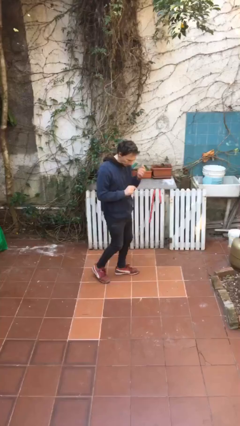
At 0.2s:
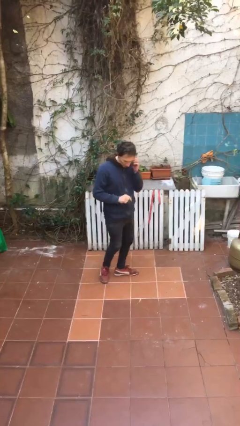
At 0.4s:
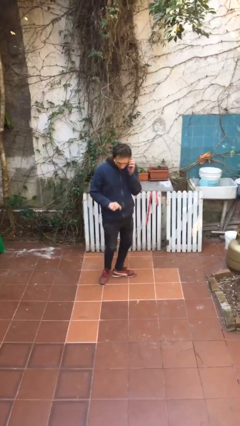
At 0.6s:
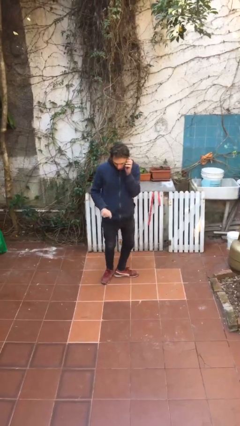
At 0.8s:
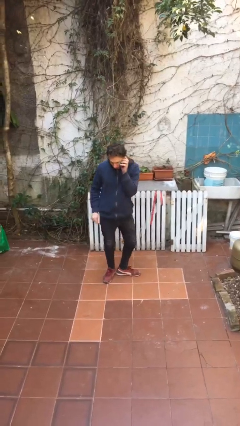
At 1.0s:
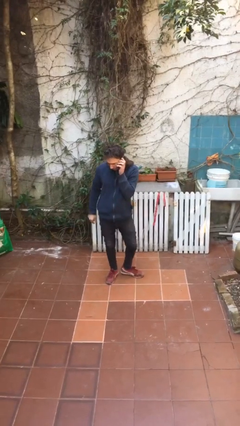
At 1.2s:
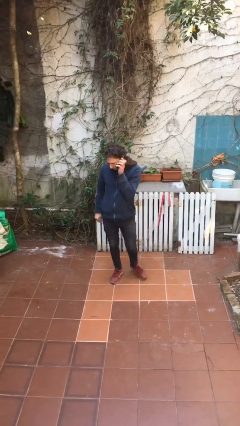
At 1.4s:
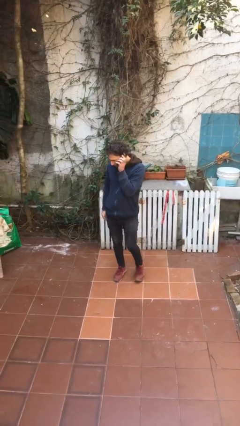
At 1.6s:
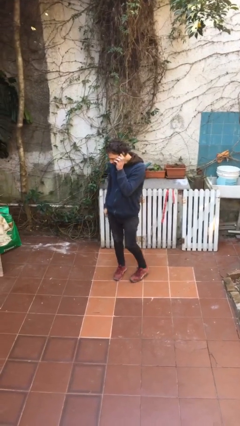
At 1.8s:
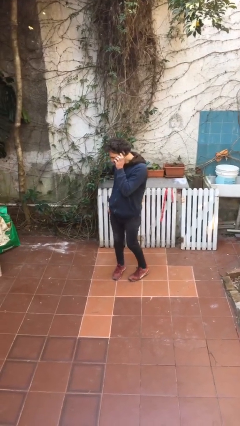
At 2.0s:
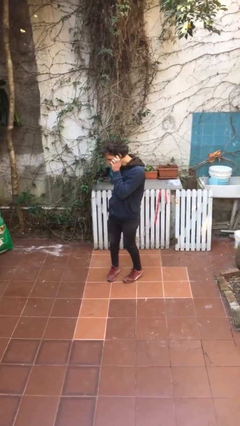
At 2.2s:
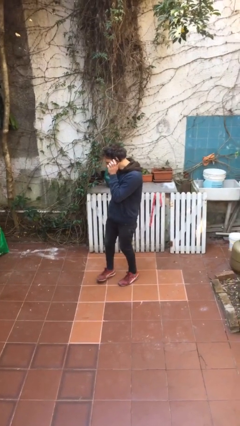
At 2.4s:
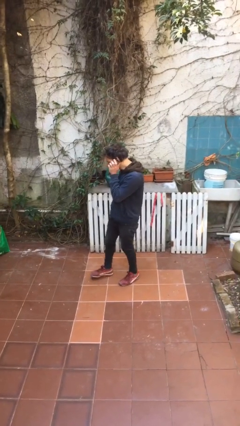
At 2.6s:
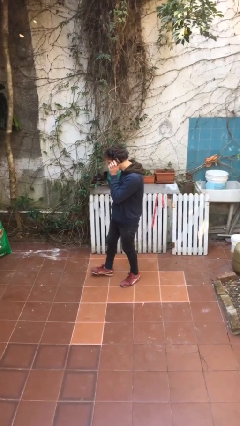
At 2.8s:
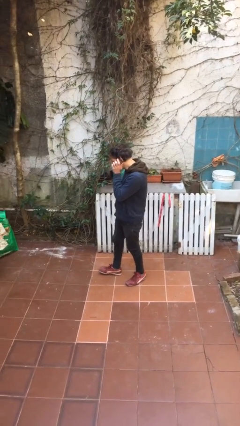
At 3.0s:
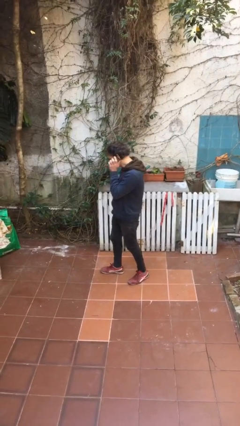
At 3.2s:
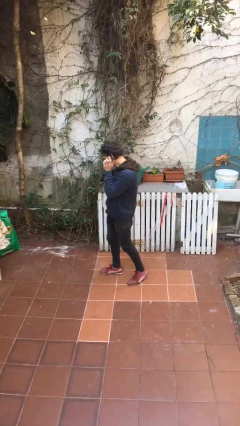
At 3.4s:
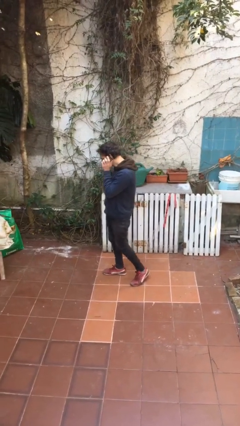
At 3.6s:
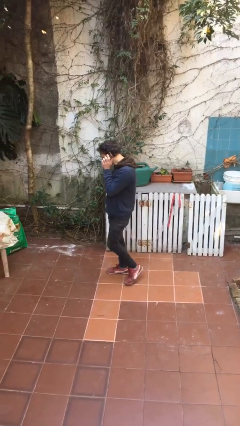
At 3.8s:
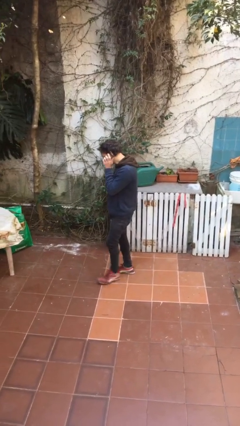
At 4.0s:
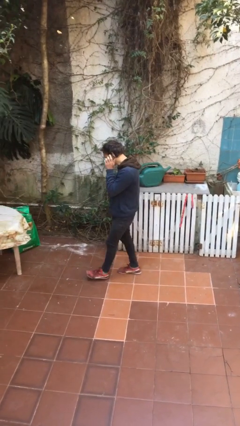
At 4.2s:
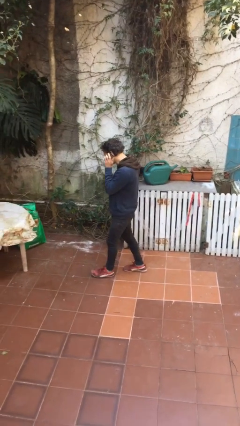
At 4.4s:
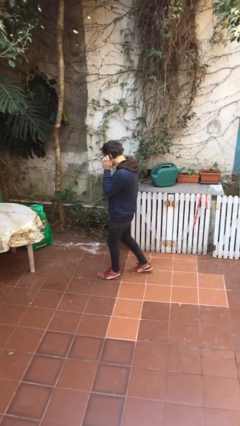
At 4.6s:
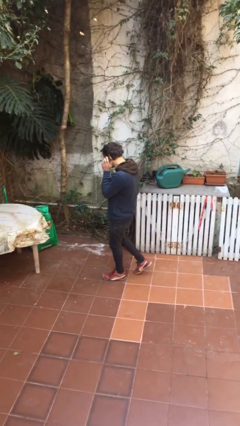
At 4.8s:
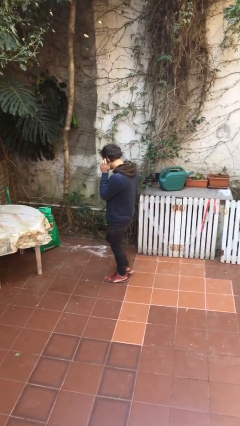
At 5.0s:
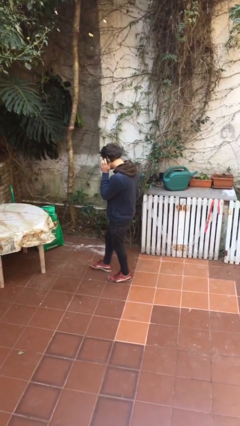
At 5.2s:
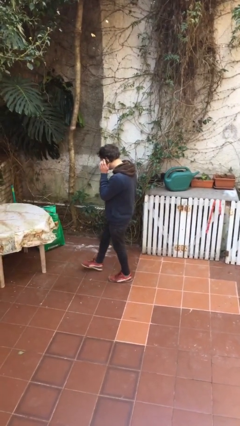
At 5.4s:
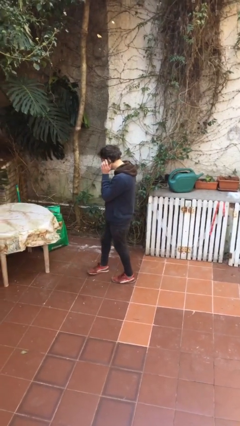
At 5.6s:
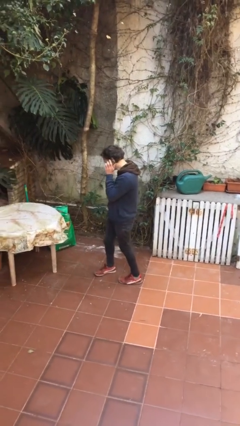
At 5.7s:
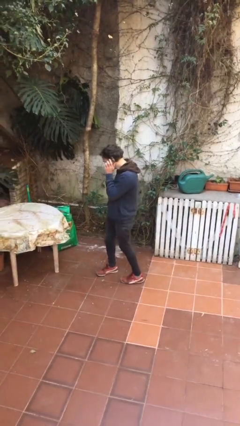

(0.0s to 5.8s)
person talks on phone

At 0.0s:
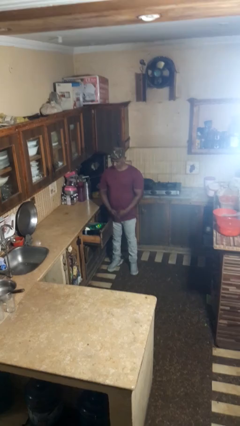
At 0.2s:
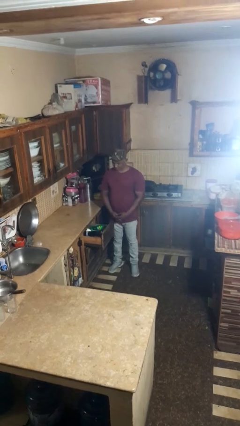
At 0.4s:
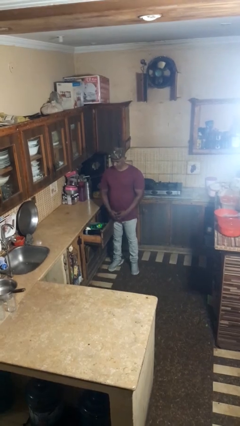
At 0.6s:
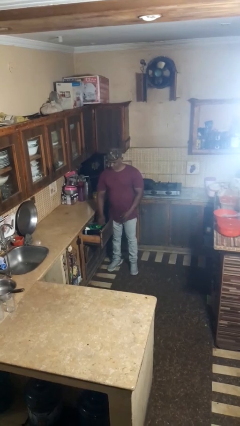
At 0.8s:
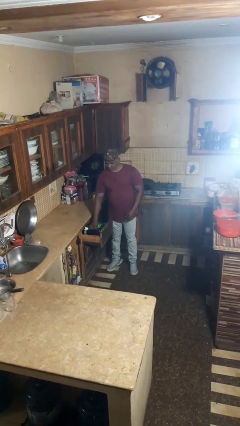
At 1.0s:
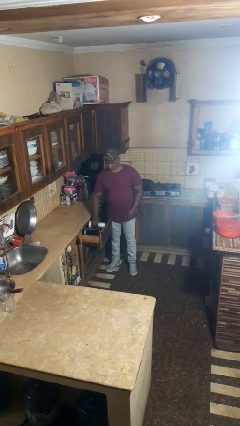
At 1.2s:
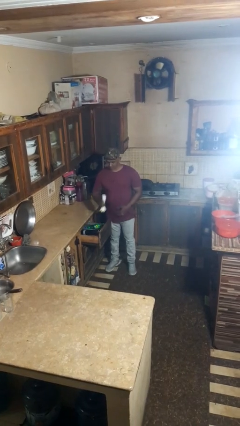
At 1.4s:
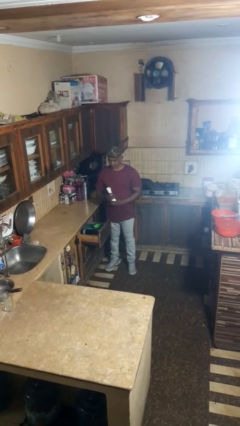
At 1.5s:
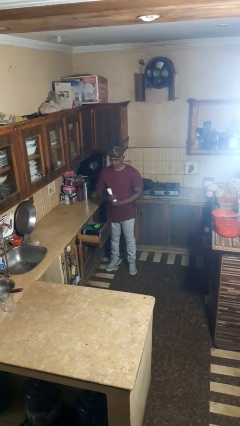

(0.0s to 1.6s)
person takes object from kitchen drawer

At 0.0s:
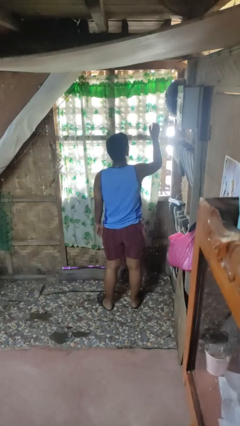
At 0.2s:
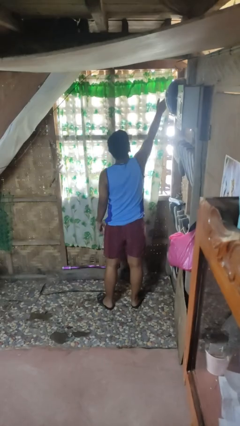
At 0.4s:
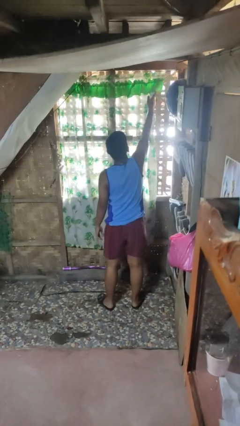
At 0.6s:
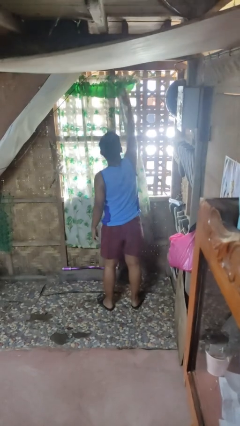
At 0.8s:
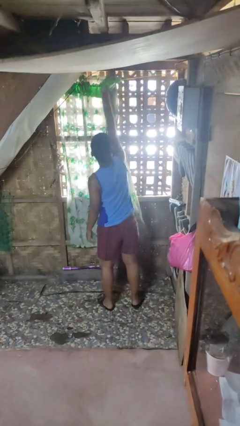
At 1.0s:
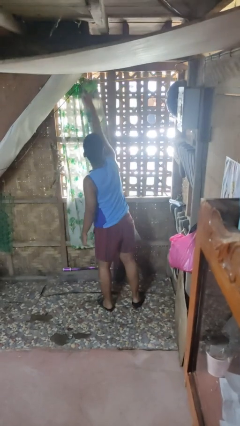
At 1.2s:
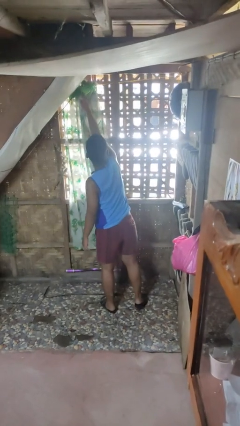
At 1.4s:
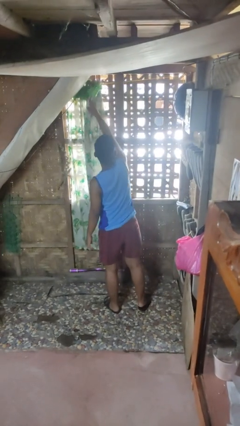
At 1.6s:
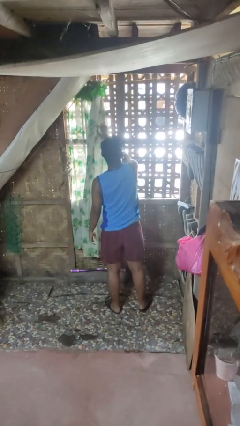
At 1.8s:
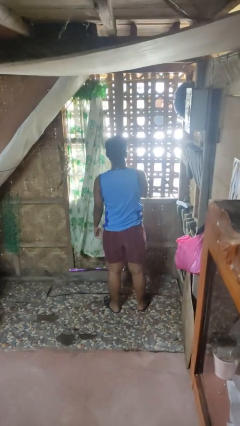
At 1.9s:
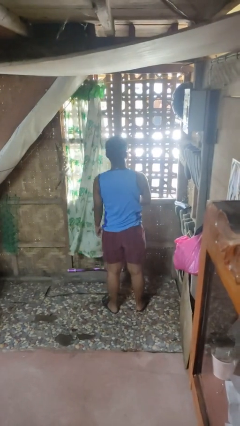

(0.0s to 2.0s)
person opens curtains

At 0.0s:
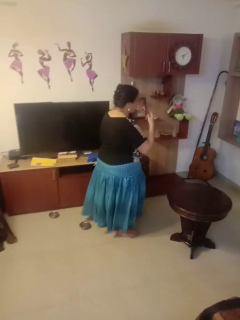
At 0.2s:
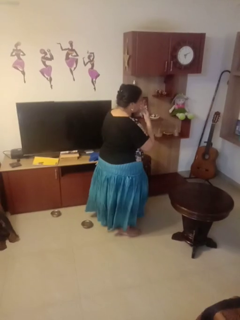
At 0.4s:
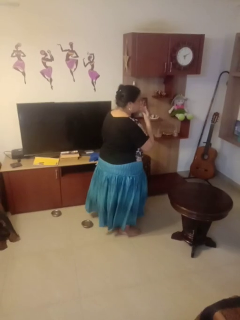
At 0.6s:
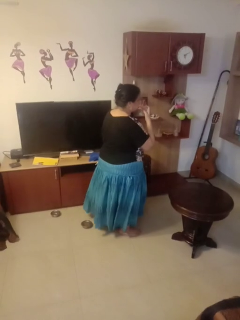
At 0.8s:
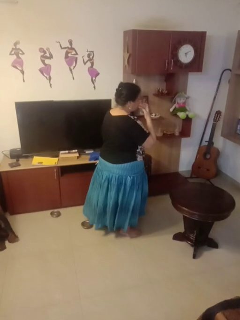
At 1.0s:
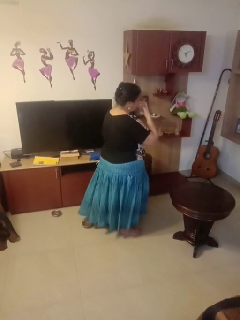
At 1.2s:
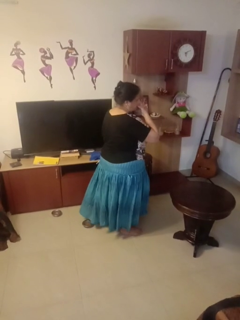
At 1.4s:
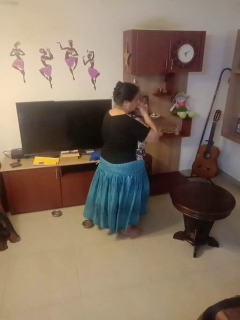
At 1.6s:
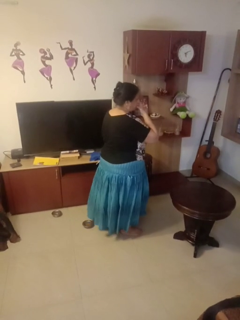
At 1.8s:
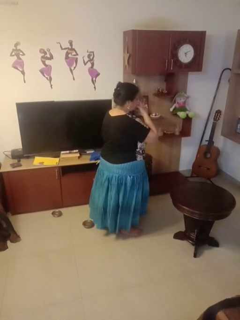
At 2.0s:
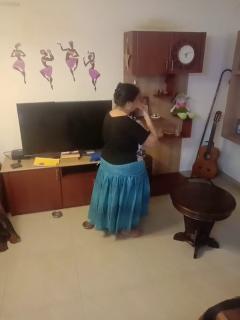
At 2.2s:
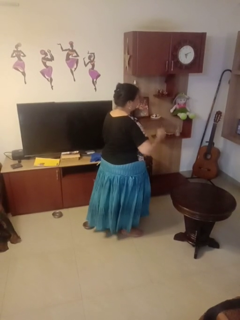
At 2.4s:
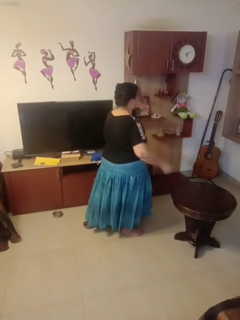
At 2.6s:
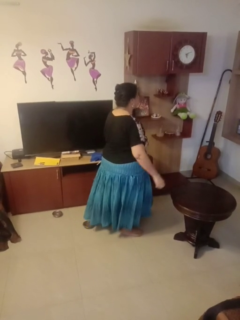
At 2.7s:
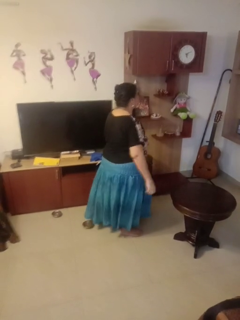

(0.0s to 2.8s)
person licks fingers

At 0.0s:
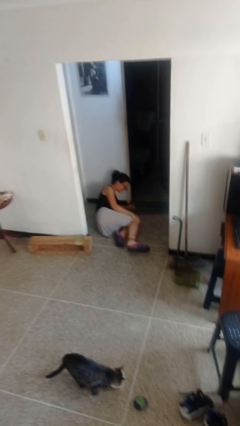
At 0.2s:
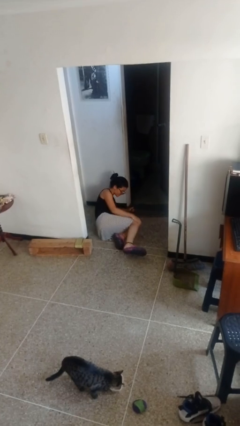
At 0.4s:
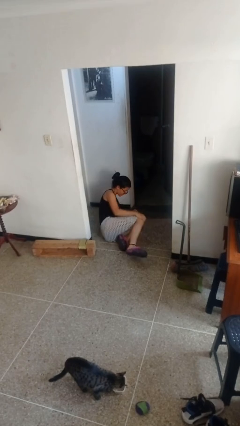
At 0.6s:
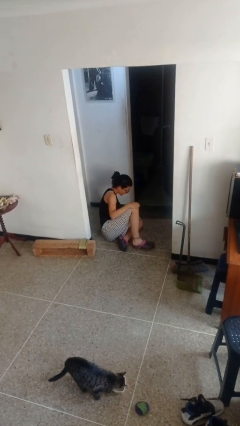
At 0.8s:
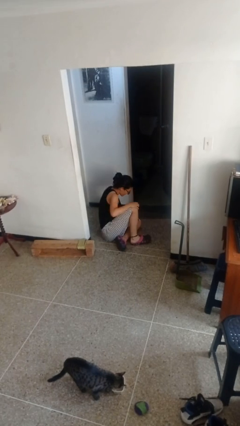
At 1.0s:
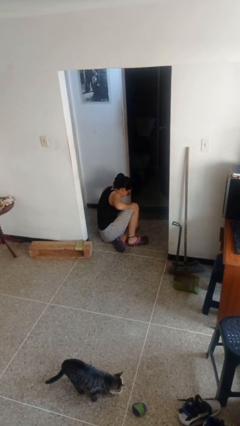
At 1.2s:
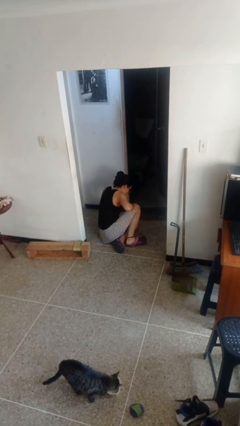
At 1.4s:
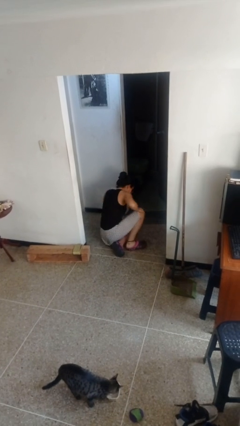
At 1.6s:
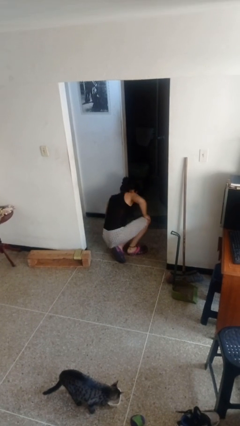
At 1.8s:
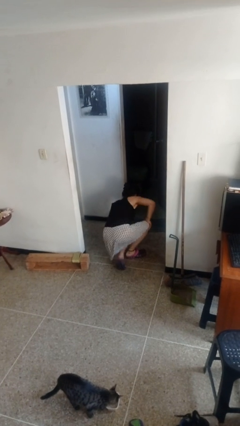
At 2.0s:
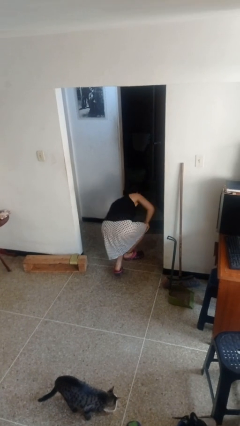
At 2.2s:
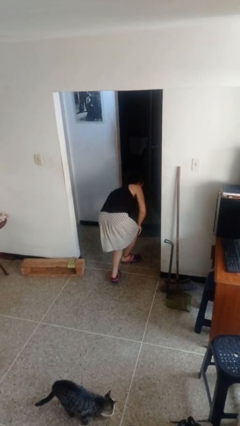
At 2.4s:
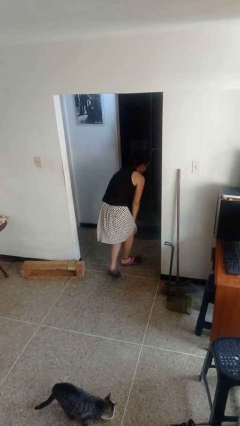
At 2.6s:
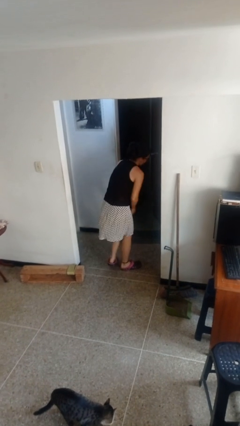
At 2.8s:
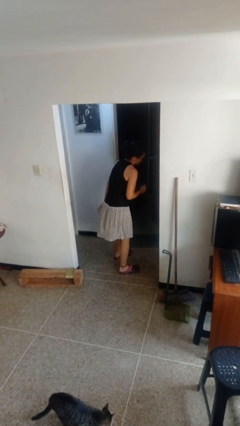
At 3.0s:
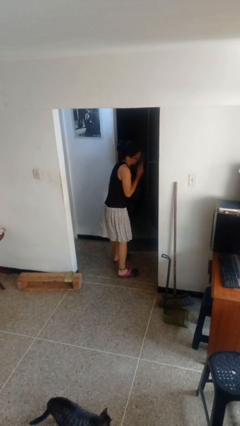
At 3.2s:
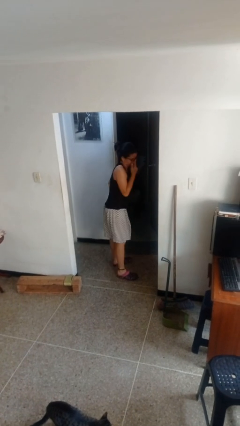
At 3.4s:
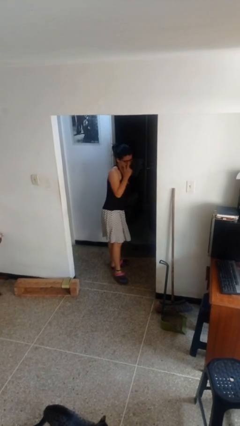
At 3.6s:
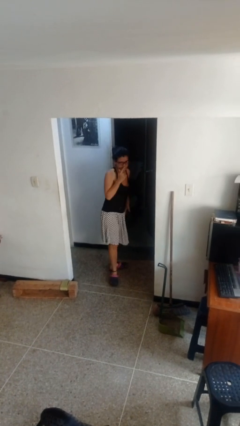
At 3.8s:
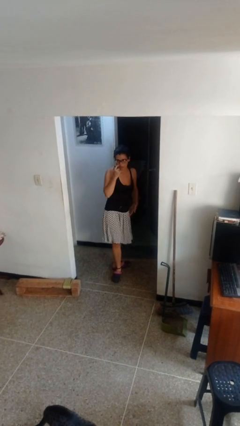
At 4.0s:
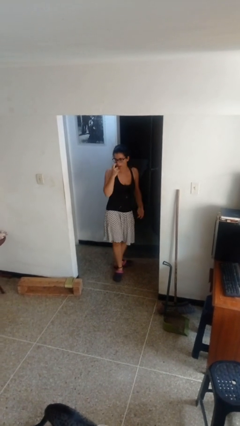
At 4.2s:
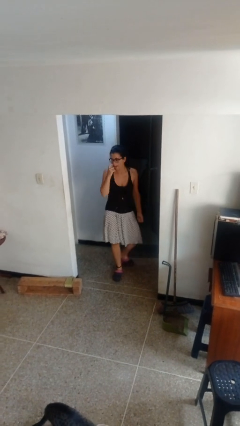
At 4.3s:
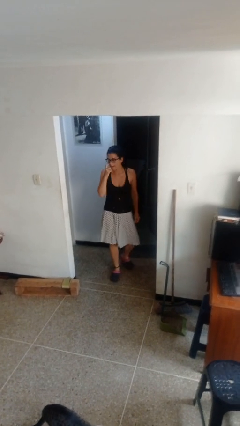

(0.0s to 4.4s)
person stands up from floor

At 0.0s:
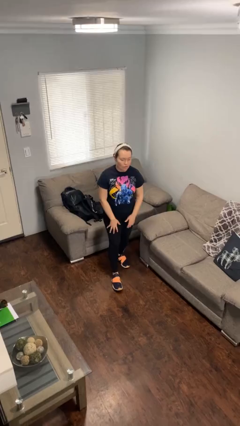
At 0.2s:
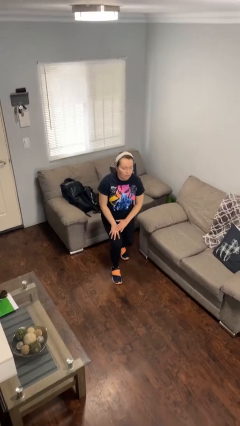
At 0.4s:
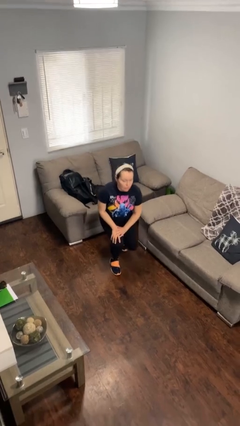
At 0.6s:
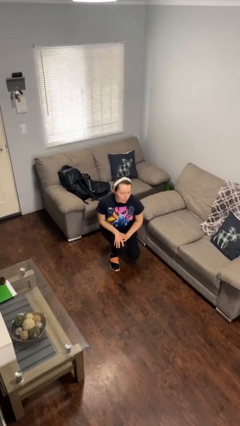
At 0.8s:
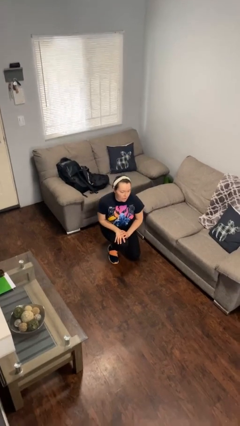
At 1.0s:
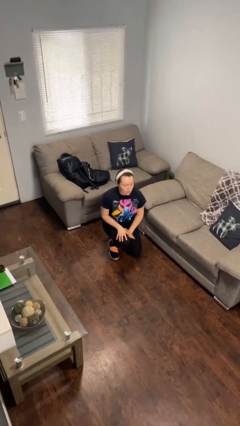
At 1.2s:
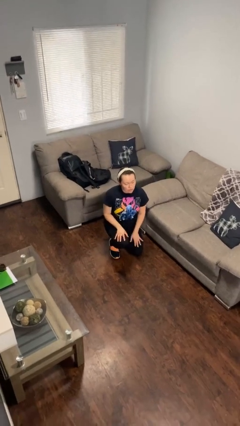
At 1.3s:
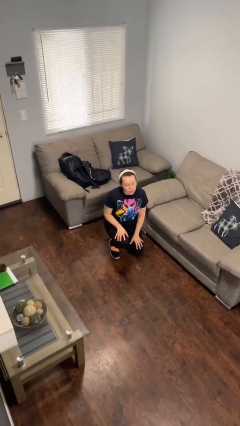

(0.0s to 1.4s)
person kneels
